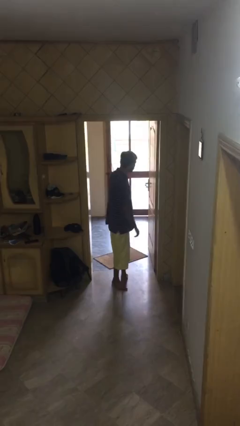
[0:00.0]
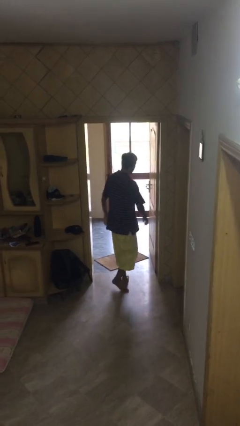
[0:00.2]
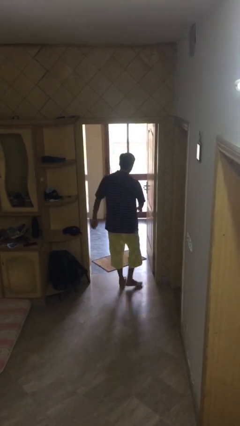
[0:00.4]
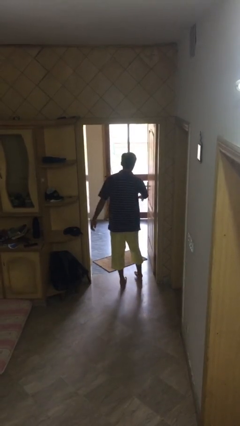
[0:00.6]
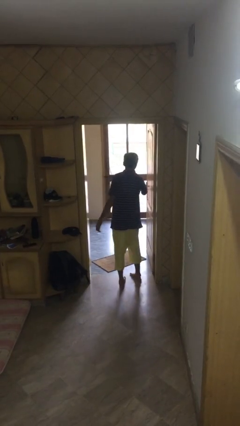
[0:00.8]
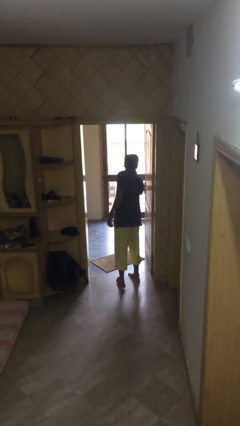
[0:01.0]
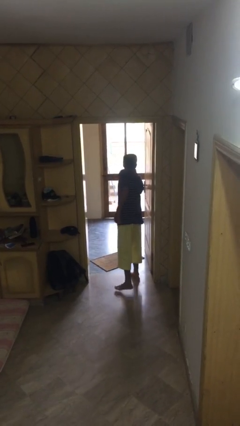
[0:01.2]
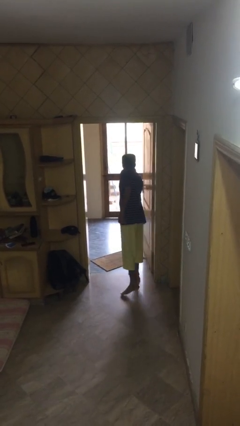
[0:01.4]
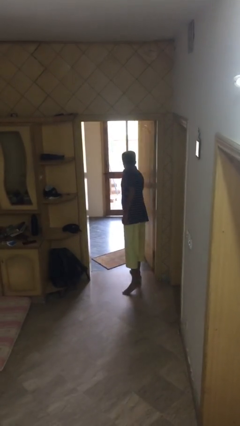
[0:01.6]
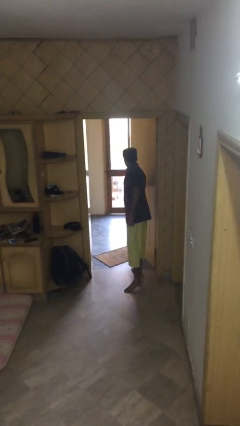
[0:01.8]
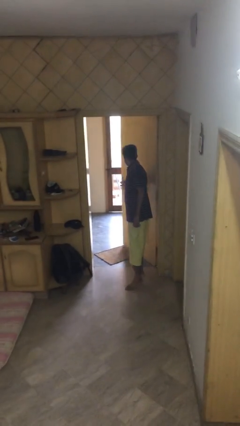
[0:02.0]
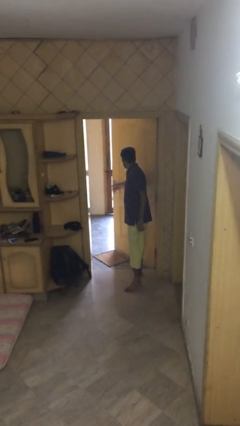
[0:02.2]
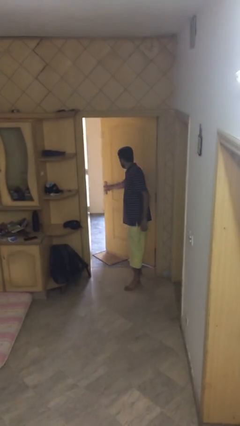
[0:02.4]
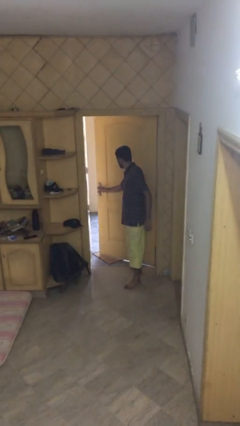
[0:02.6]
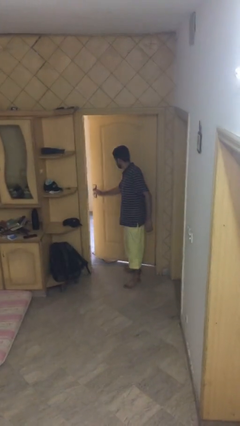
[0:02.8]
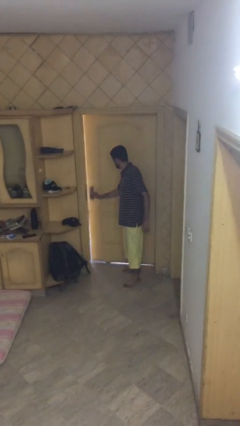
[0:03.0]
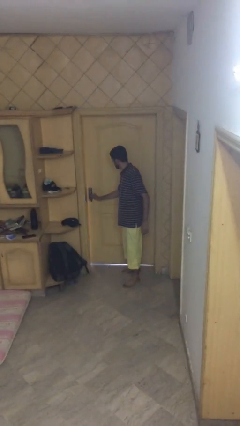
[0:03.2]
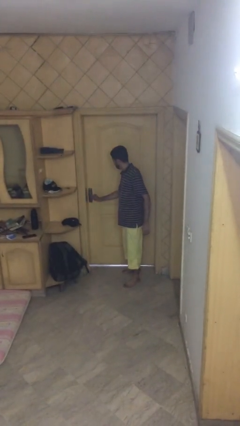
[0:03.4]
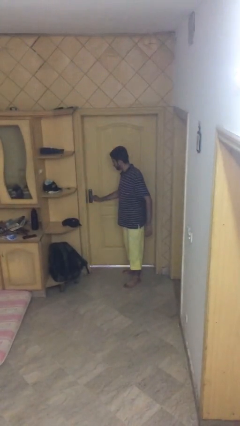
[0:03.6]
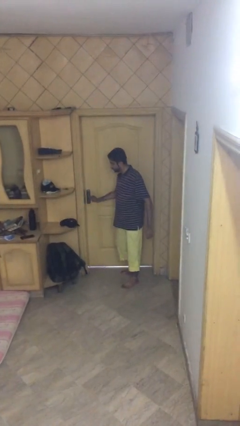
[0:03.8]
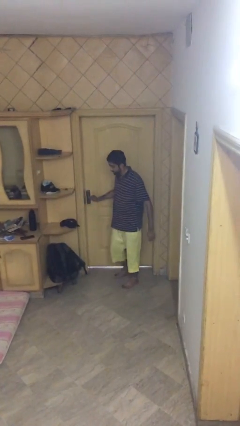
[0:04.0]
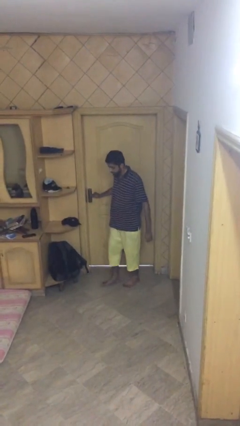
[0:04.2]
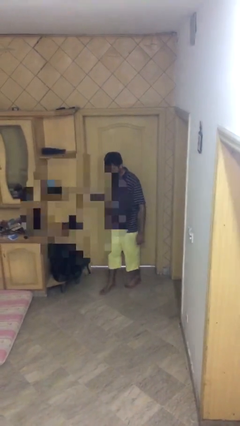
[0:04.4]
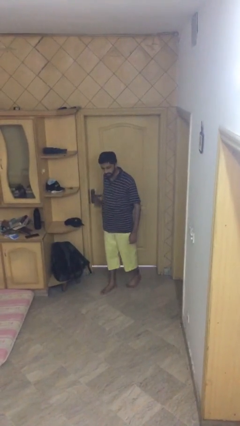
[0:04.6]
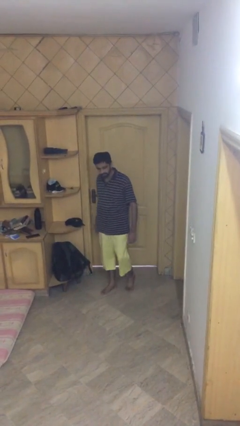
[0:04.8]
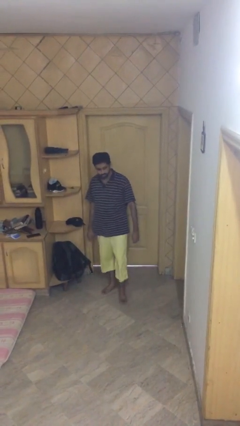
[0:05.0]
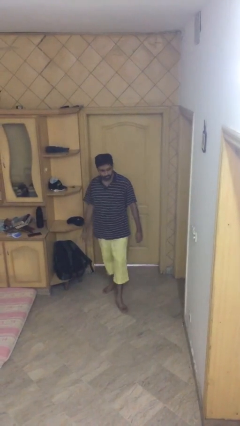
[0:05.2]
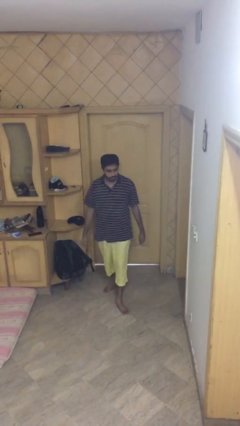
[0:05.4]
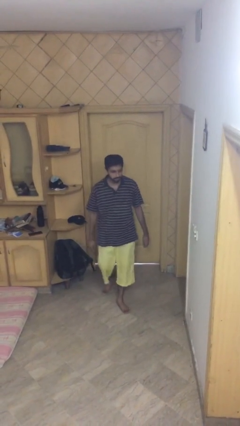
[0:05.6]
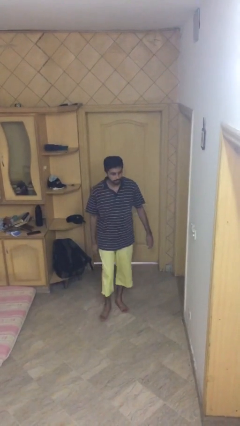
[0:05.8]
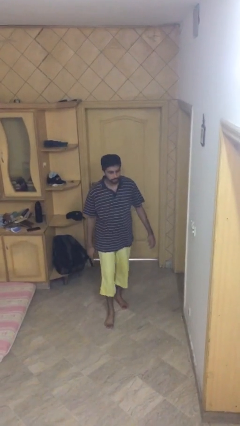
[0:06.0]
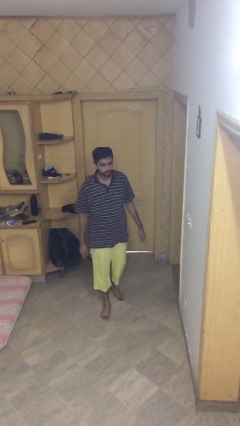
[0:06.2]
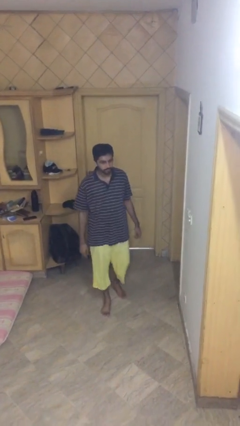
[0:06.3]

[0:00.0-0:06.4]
person closes facility door

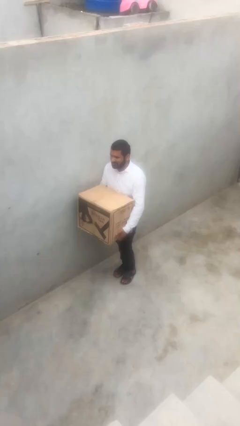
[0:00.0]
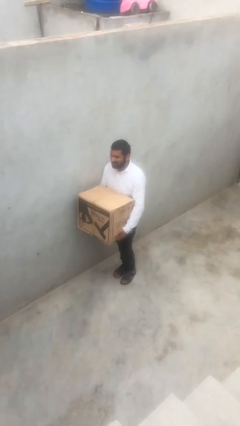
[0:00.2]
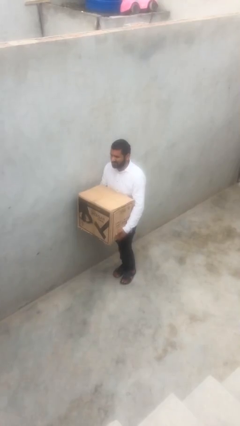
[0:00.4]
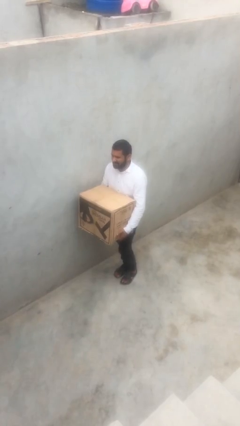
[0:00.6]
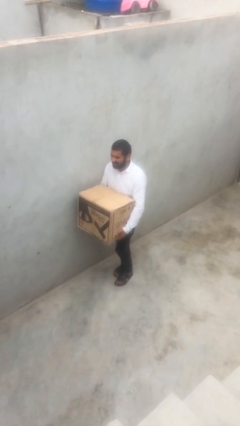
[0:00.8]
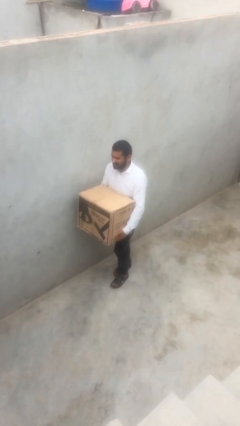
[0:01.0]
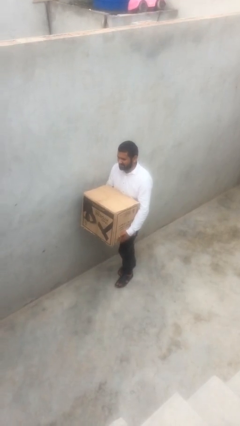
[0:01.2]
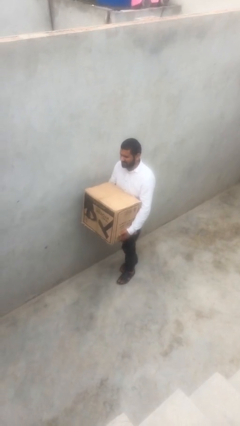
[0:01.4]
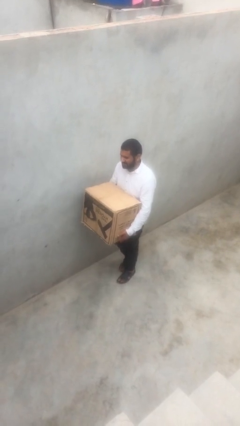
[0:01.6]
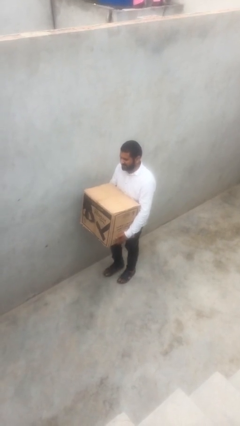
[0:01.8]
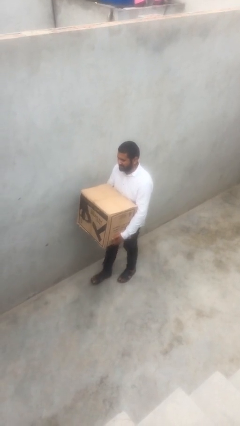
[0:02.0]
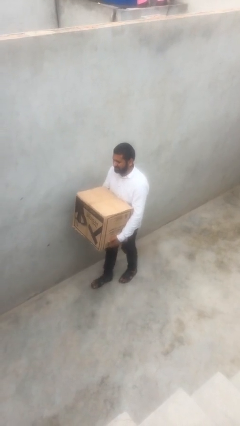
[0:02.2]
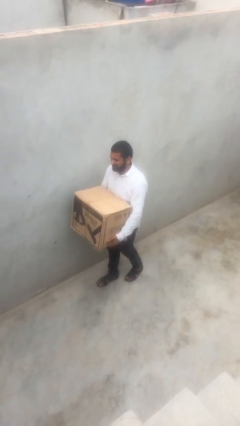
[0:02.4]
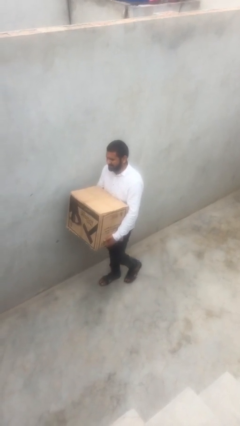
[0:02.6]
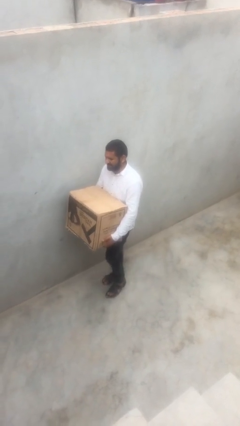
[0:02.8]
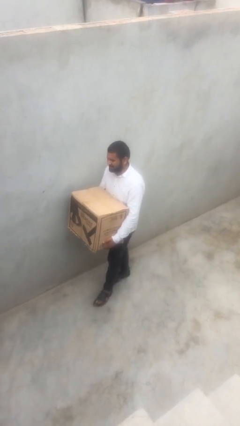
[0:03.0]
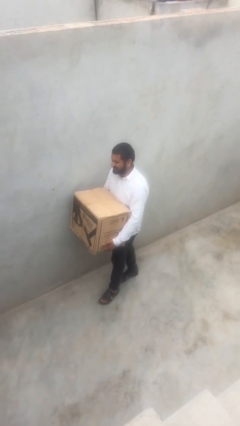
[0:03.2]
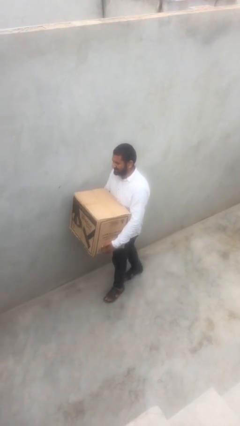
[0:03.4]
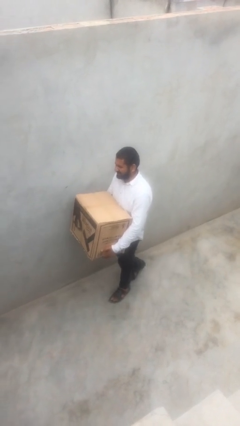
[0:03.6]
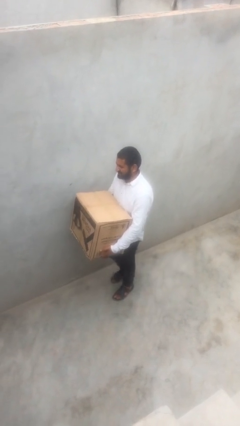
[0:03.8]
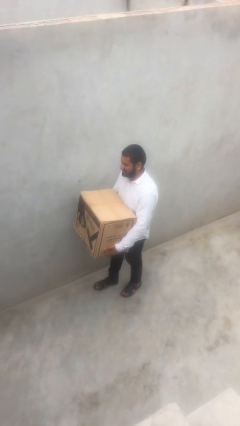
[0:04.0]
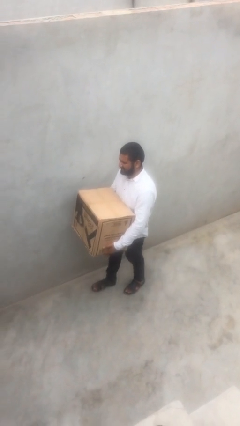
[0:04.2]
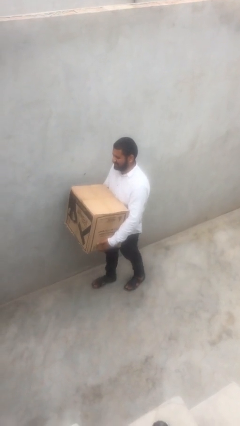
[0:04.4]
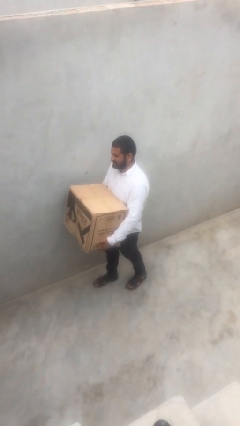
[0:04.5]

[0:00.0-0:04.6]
person carries heavy object

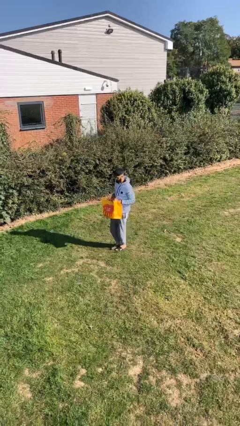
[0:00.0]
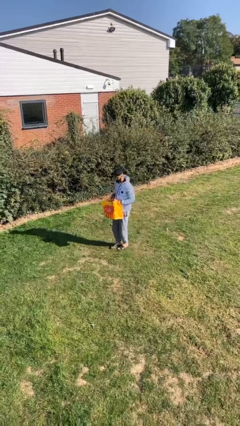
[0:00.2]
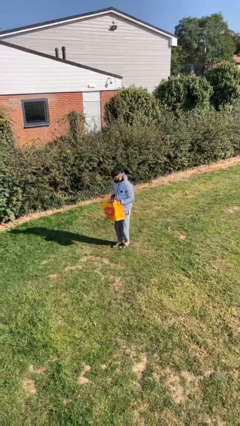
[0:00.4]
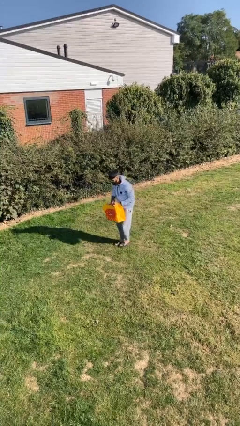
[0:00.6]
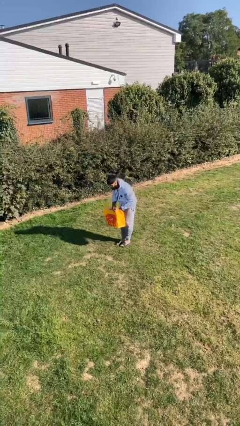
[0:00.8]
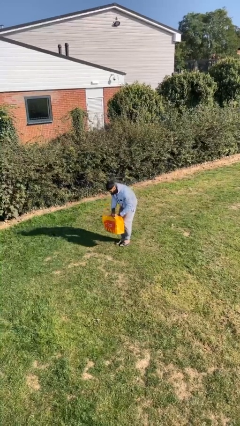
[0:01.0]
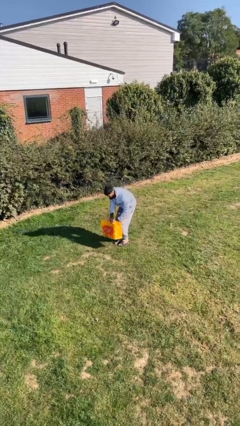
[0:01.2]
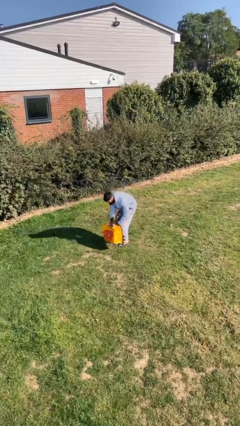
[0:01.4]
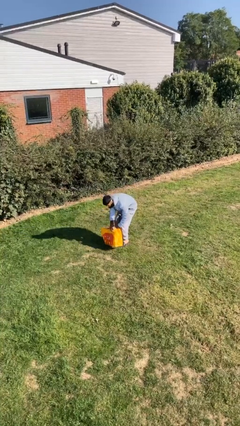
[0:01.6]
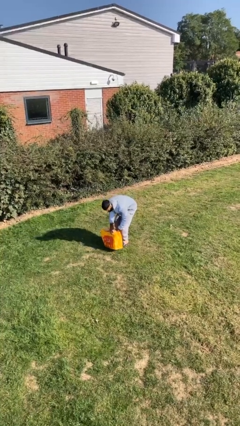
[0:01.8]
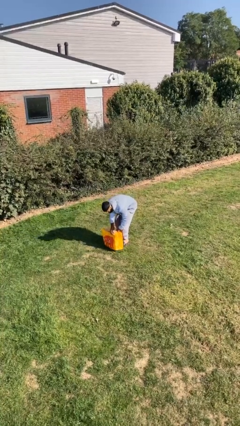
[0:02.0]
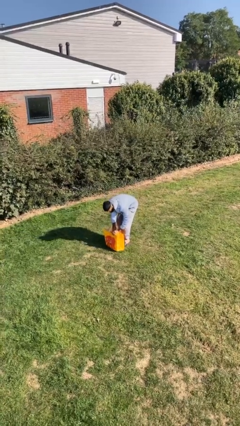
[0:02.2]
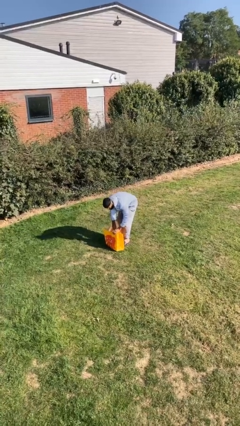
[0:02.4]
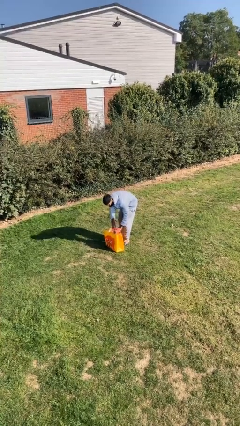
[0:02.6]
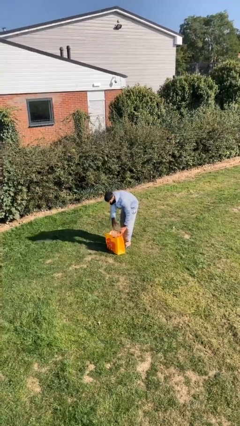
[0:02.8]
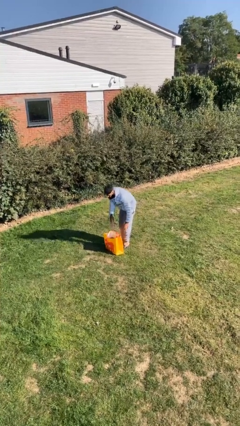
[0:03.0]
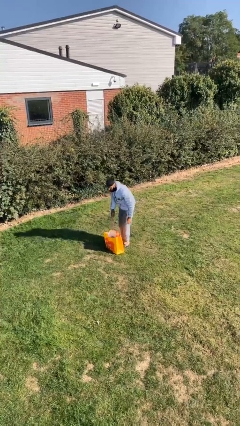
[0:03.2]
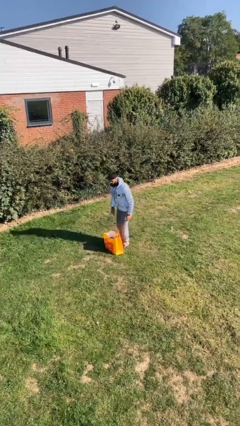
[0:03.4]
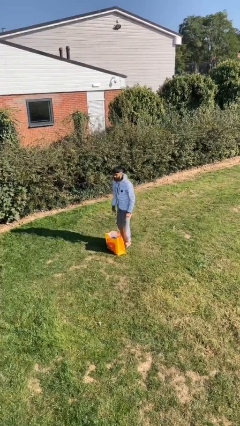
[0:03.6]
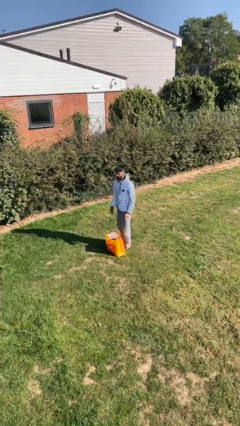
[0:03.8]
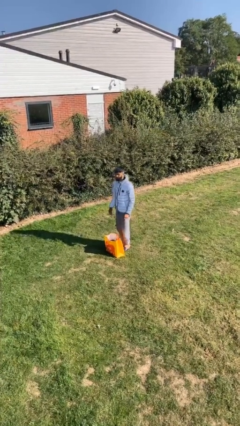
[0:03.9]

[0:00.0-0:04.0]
person puts down object on floor

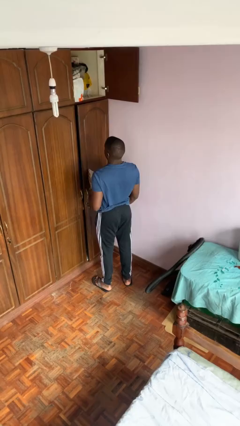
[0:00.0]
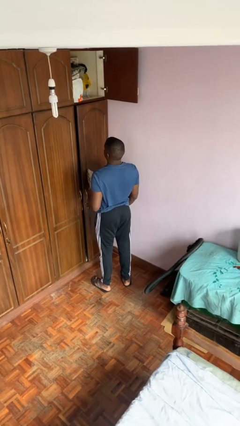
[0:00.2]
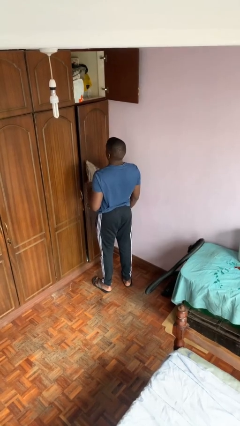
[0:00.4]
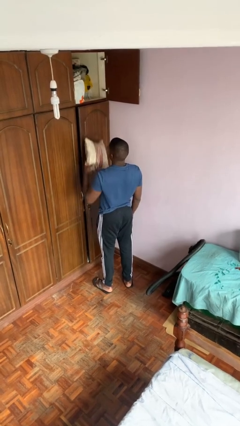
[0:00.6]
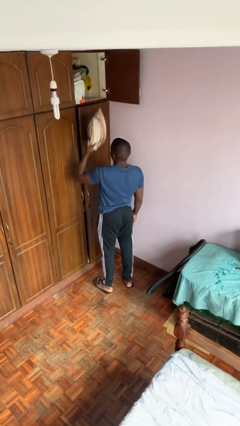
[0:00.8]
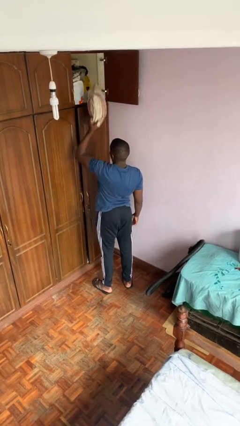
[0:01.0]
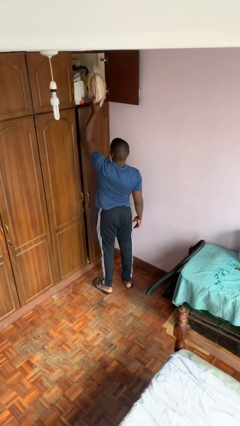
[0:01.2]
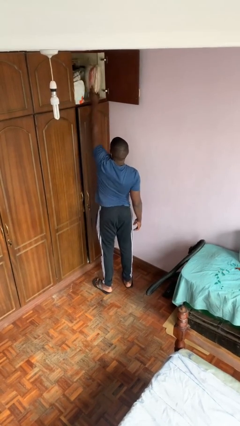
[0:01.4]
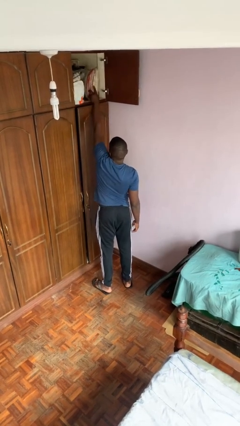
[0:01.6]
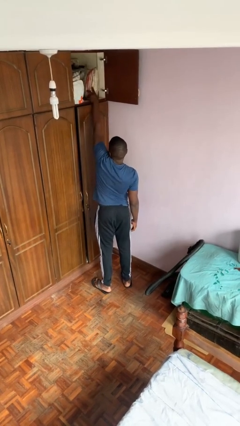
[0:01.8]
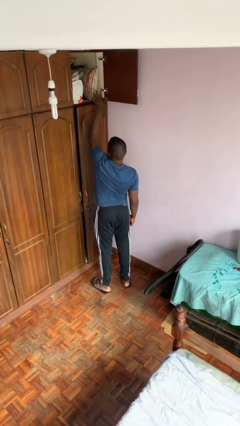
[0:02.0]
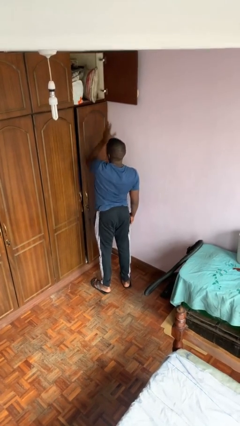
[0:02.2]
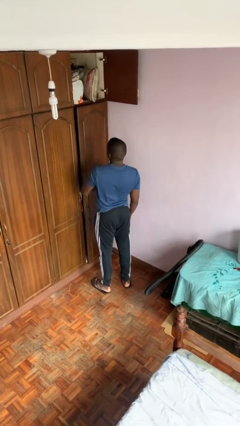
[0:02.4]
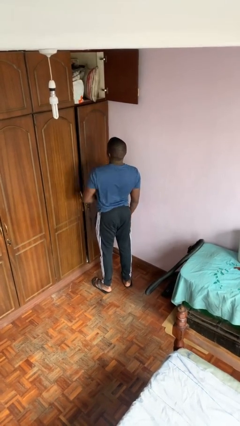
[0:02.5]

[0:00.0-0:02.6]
person puts down object on shelf

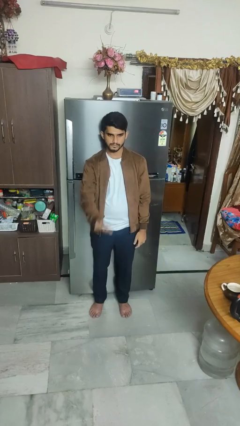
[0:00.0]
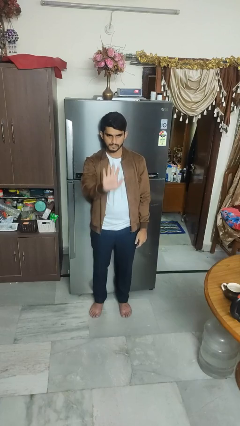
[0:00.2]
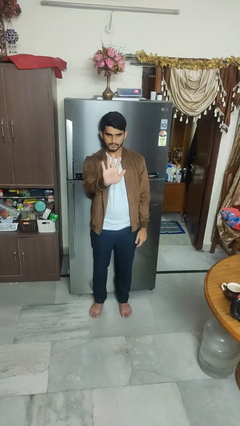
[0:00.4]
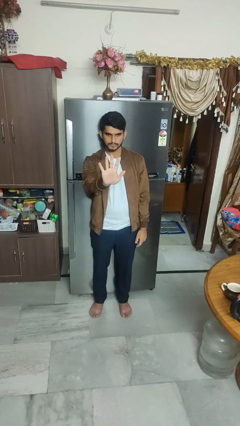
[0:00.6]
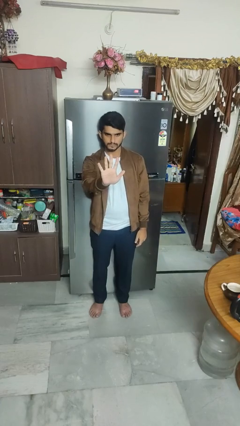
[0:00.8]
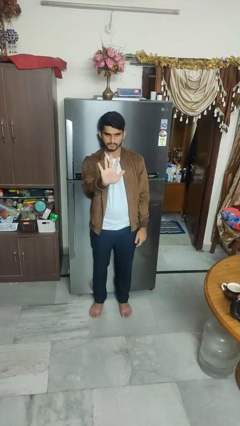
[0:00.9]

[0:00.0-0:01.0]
person gestures number five
